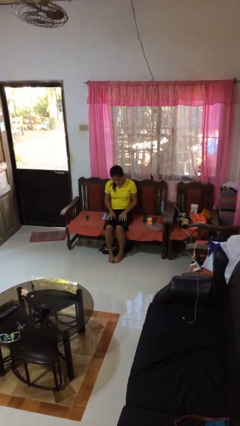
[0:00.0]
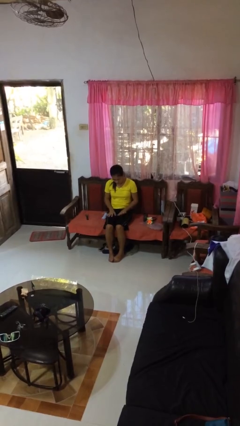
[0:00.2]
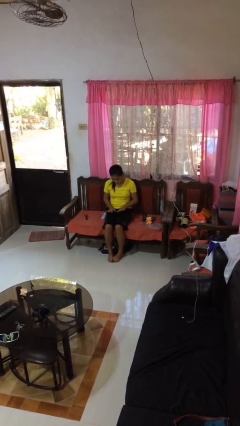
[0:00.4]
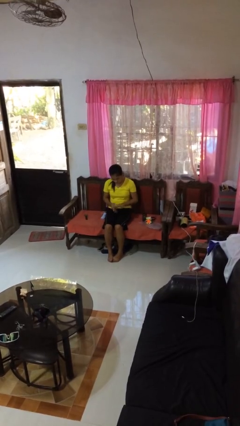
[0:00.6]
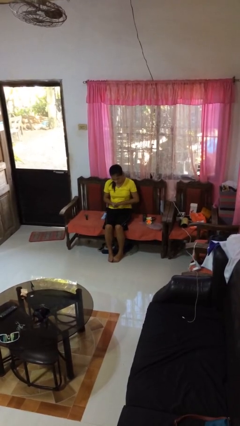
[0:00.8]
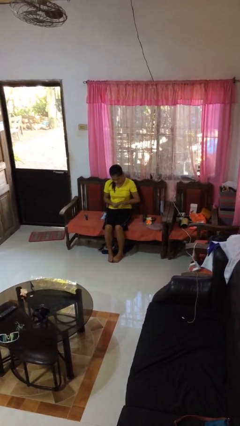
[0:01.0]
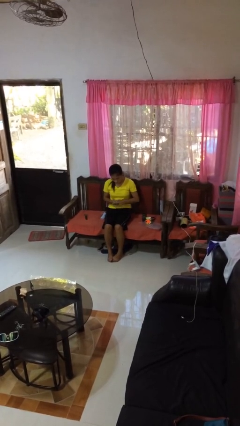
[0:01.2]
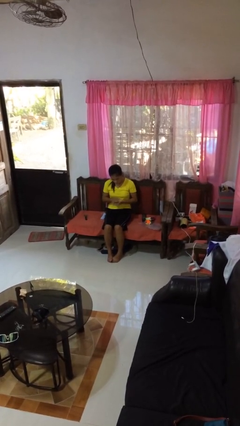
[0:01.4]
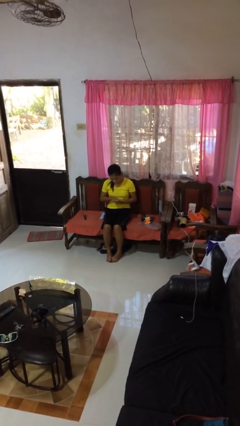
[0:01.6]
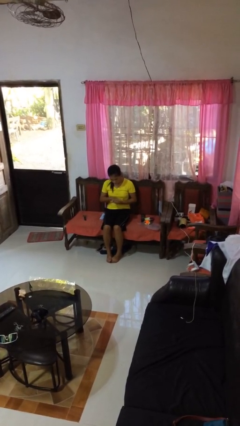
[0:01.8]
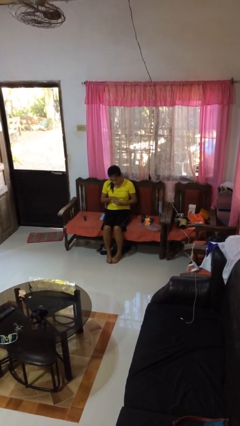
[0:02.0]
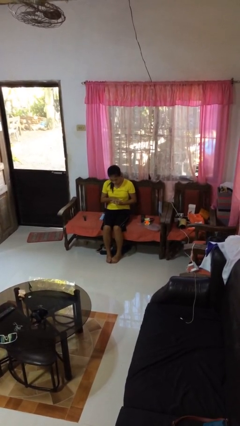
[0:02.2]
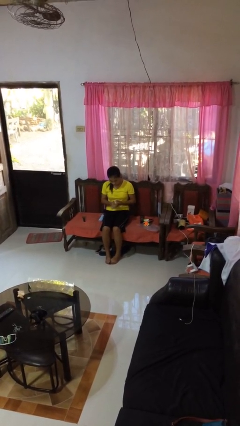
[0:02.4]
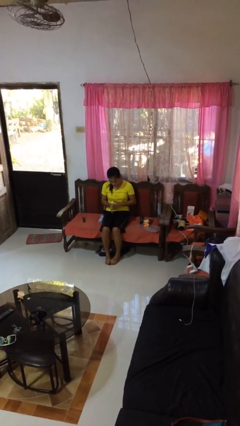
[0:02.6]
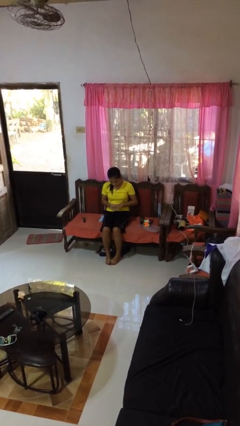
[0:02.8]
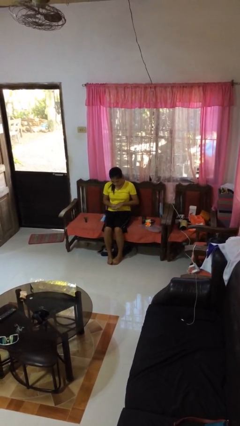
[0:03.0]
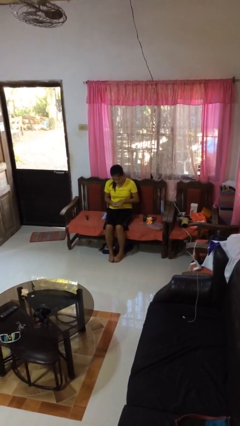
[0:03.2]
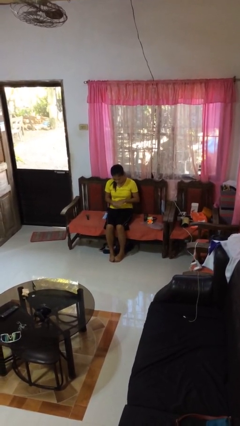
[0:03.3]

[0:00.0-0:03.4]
person looks at hands in lap

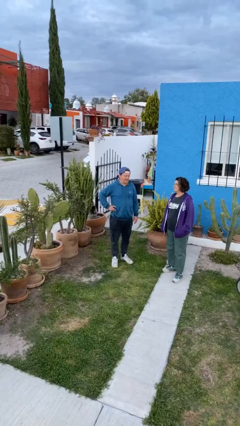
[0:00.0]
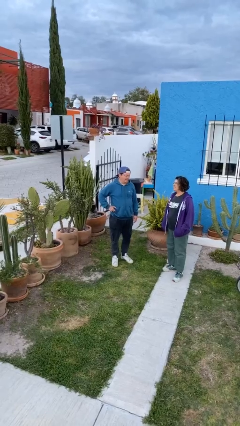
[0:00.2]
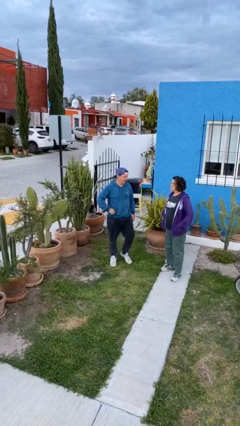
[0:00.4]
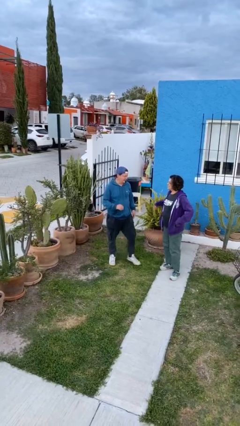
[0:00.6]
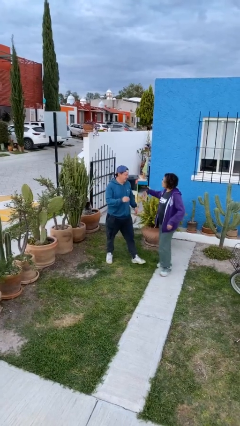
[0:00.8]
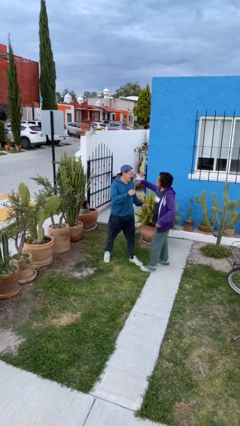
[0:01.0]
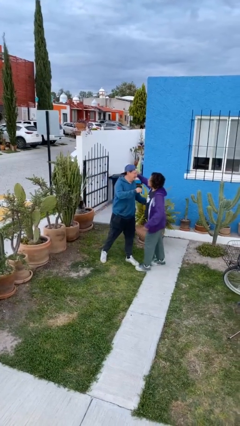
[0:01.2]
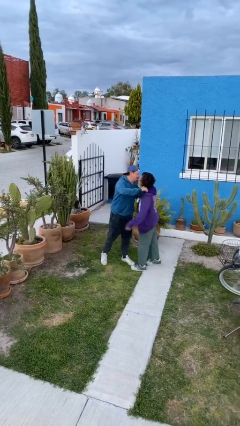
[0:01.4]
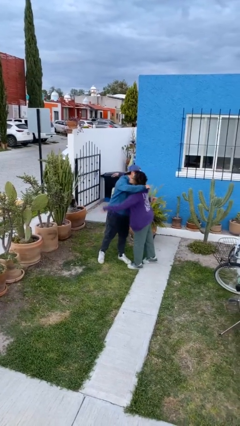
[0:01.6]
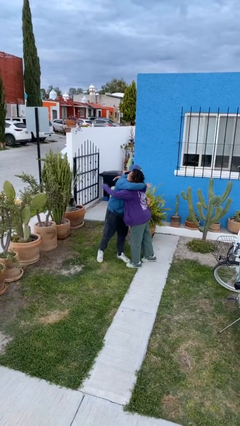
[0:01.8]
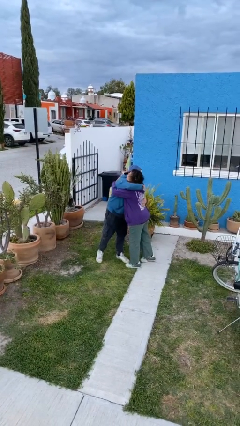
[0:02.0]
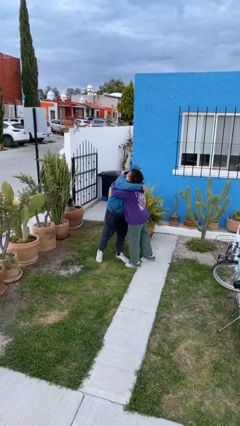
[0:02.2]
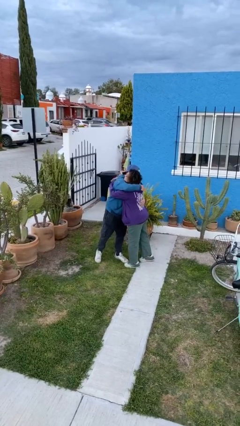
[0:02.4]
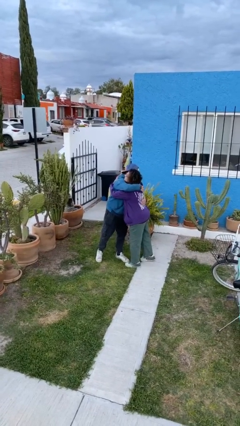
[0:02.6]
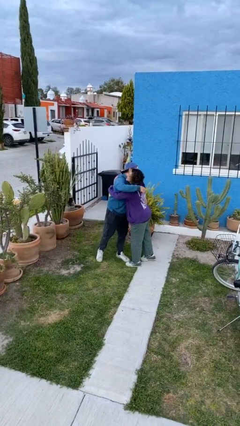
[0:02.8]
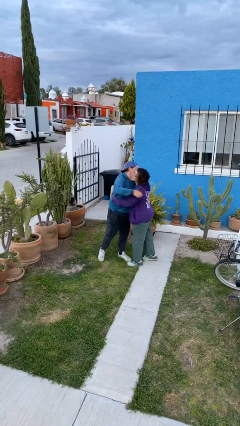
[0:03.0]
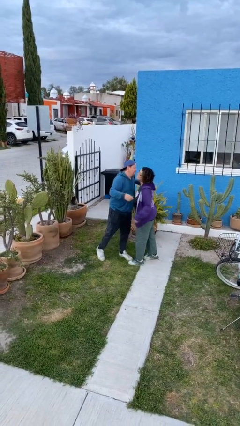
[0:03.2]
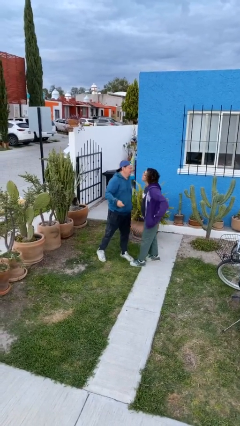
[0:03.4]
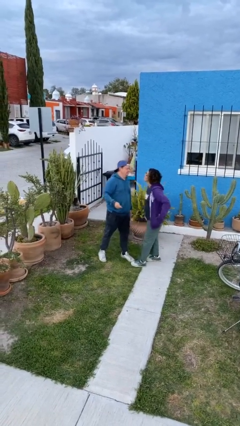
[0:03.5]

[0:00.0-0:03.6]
person embraces person

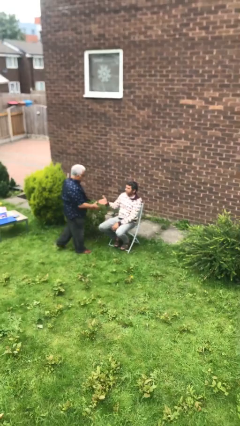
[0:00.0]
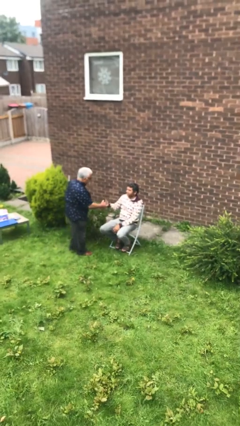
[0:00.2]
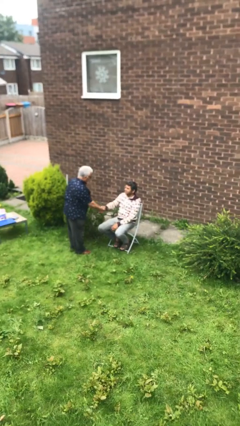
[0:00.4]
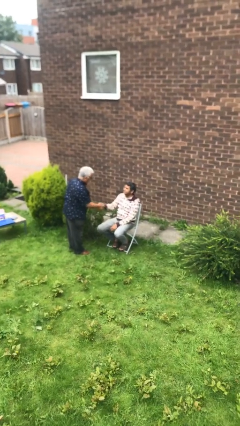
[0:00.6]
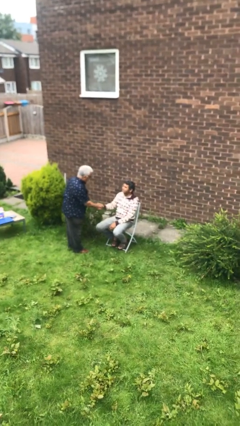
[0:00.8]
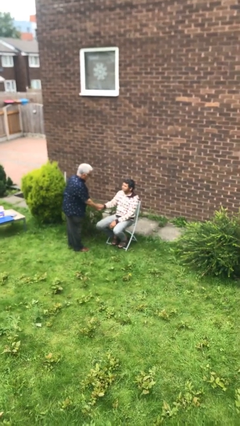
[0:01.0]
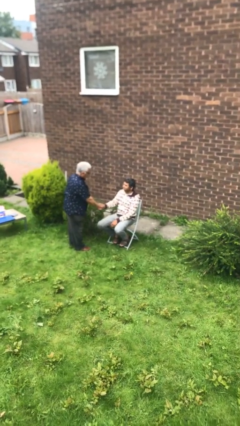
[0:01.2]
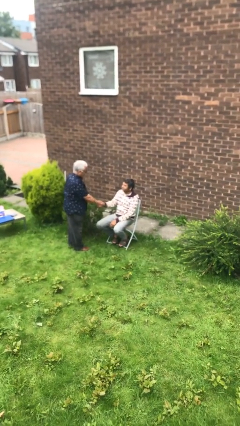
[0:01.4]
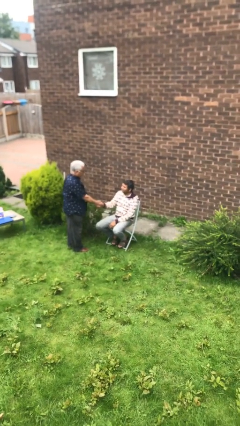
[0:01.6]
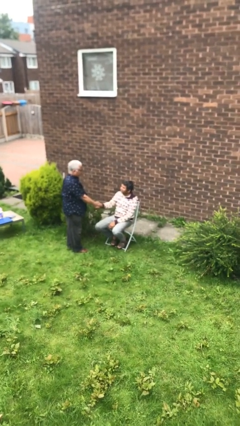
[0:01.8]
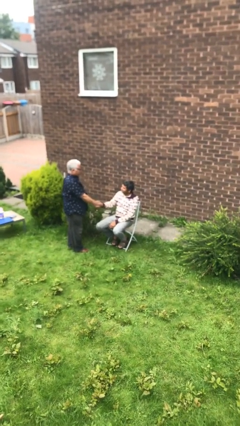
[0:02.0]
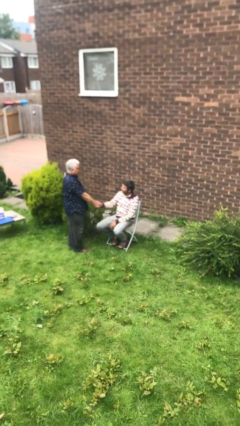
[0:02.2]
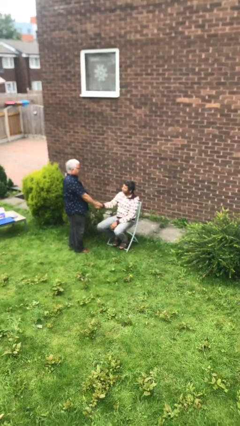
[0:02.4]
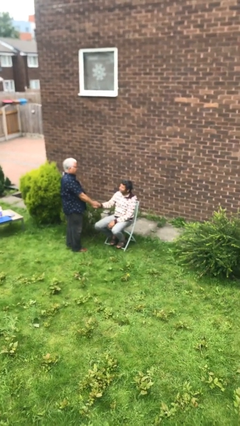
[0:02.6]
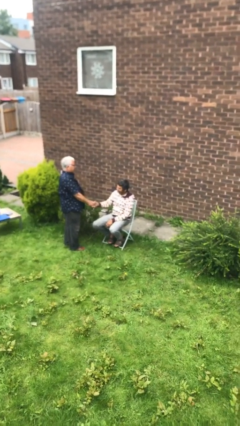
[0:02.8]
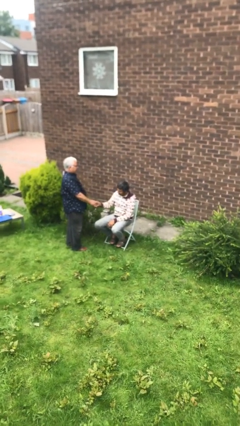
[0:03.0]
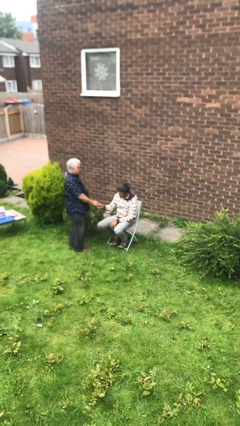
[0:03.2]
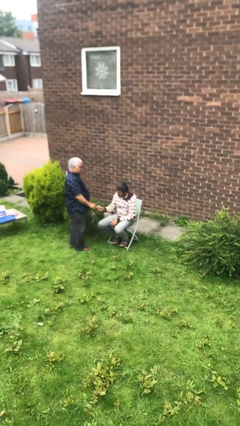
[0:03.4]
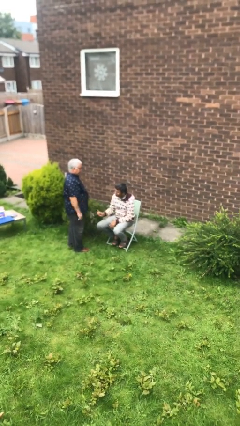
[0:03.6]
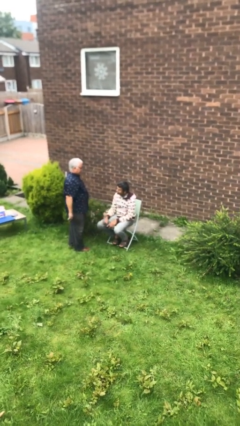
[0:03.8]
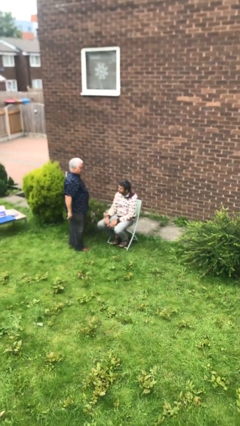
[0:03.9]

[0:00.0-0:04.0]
person shakes hand

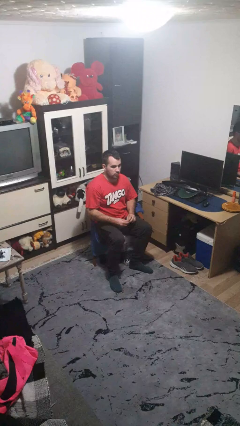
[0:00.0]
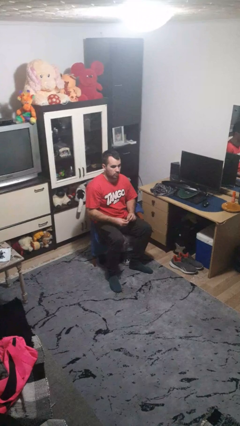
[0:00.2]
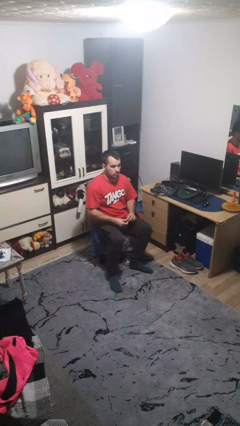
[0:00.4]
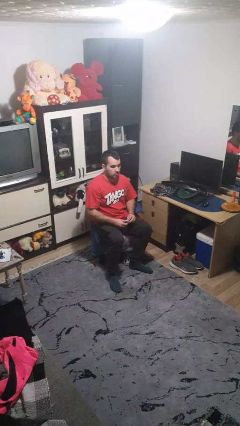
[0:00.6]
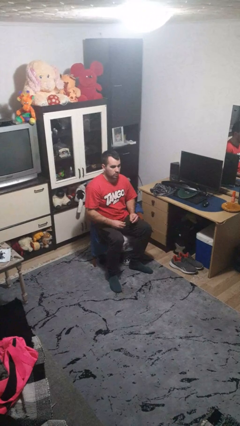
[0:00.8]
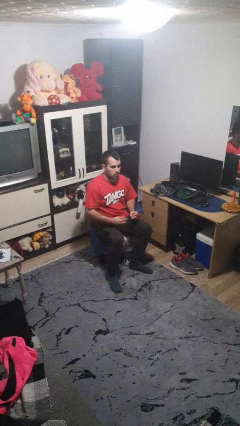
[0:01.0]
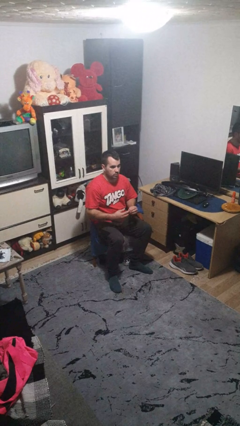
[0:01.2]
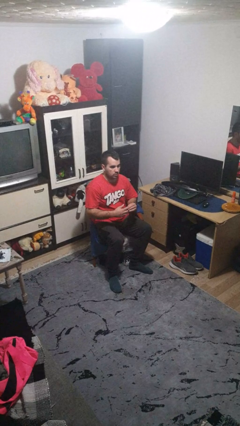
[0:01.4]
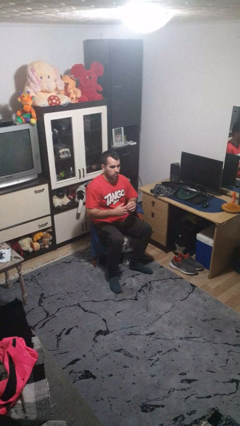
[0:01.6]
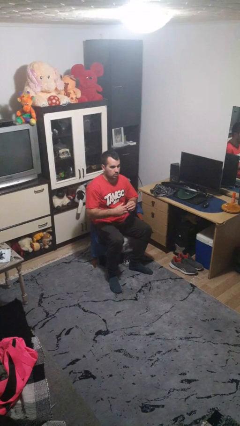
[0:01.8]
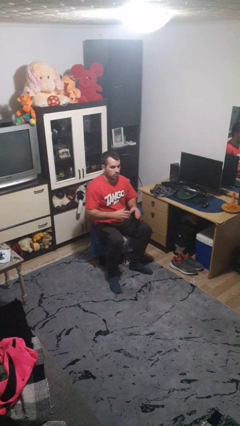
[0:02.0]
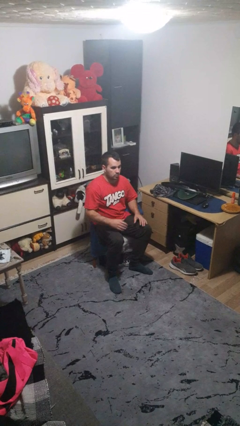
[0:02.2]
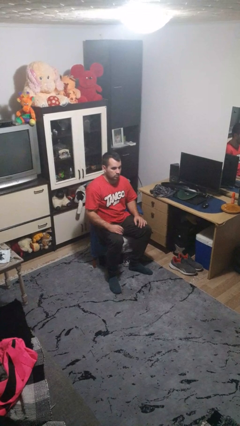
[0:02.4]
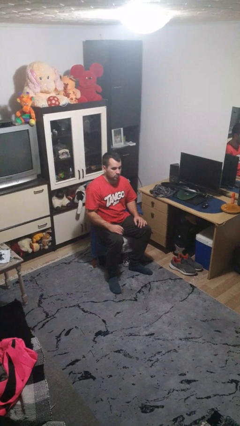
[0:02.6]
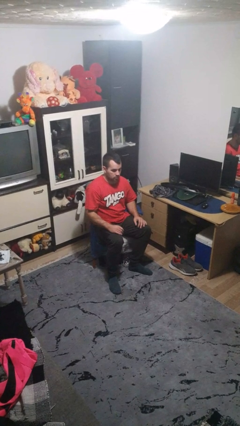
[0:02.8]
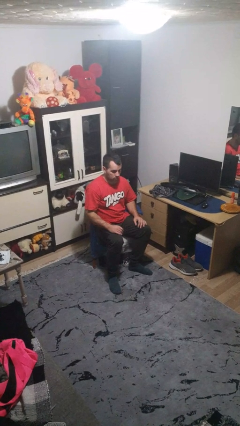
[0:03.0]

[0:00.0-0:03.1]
person puts on ring

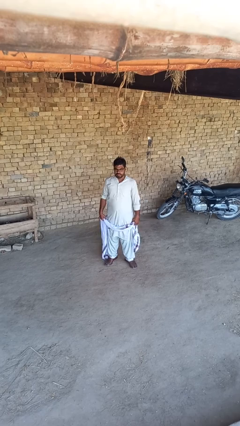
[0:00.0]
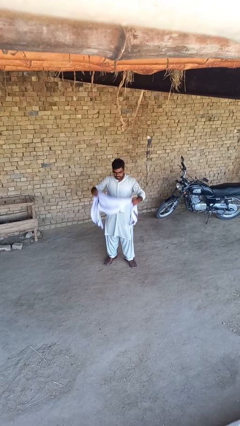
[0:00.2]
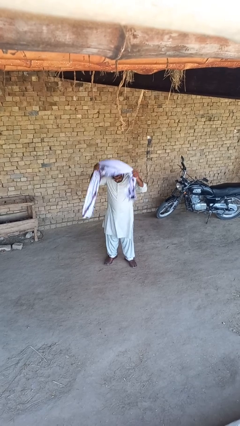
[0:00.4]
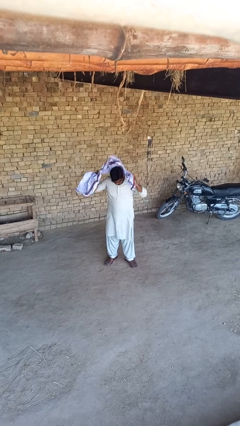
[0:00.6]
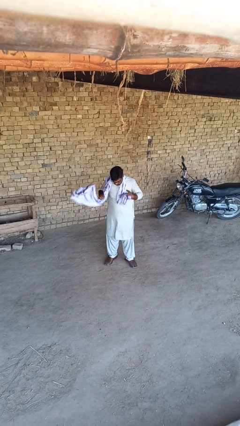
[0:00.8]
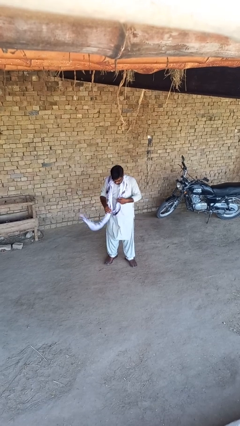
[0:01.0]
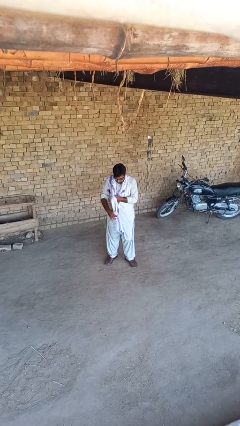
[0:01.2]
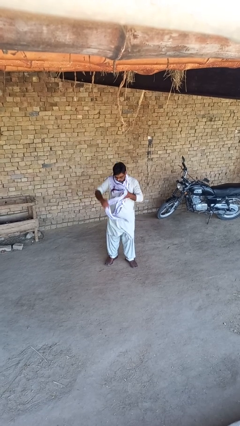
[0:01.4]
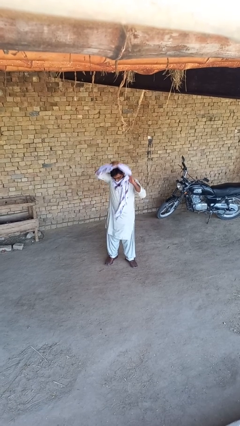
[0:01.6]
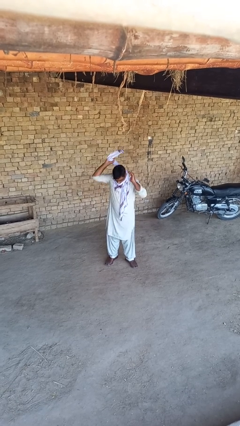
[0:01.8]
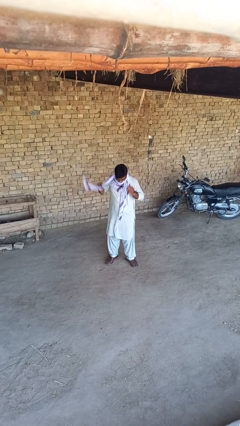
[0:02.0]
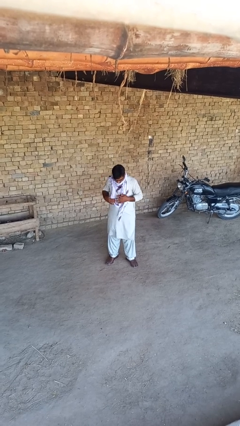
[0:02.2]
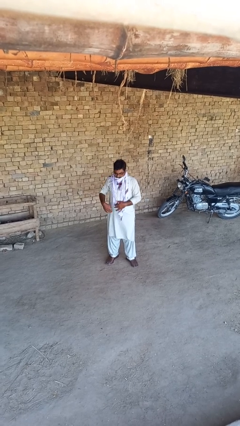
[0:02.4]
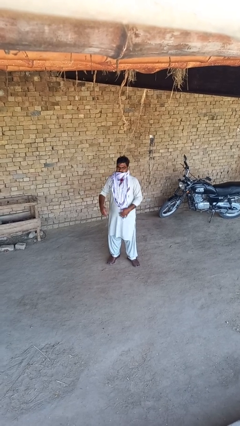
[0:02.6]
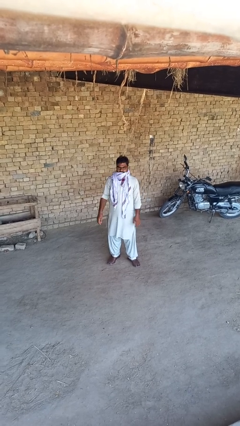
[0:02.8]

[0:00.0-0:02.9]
person puts on scarf

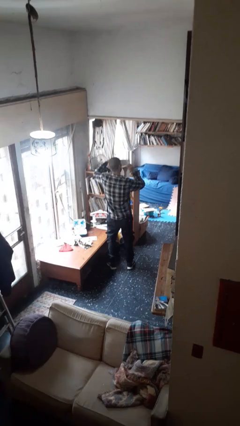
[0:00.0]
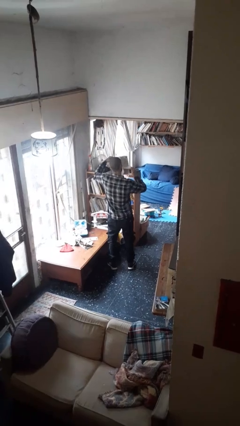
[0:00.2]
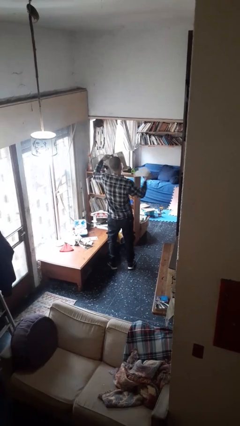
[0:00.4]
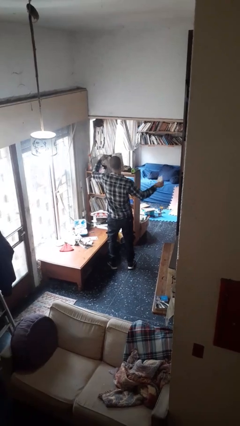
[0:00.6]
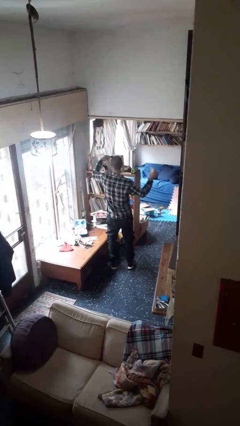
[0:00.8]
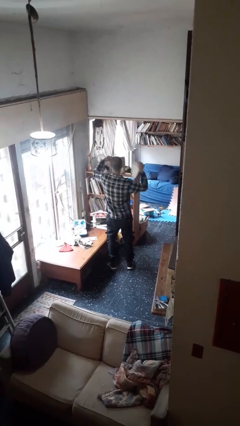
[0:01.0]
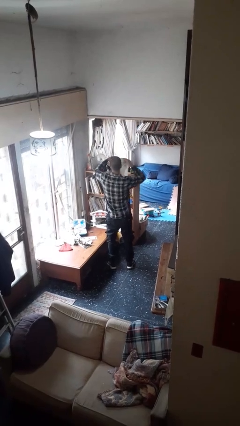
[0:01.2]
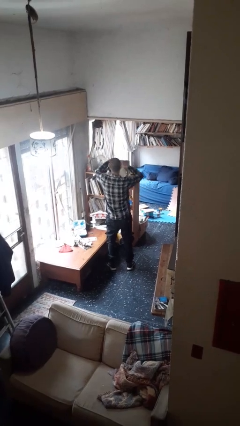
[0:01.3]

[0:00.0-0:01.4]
person tears paper
